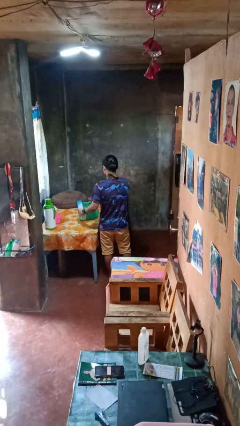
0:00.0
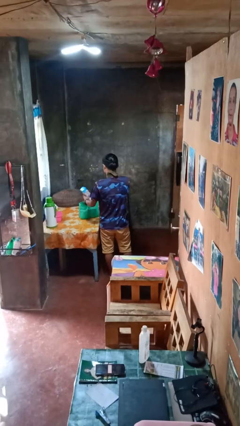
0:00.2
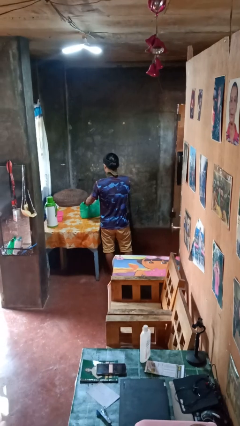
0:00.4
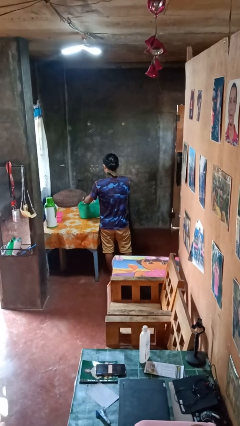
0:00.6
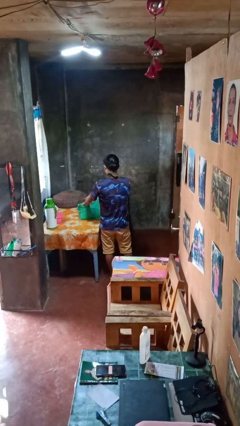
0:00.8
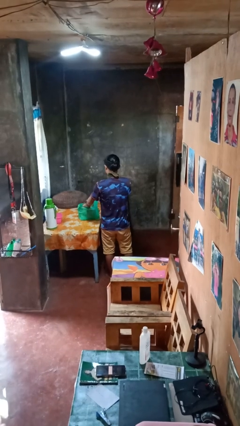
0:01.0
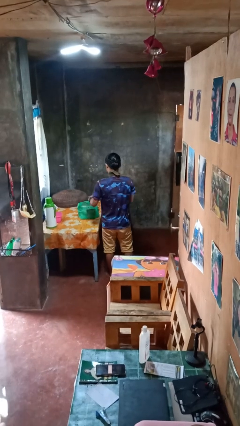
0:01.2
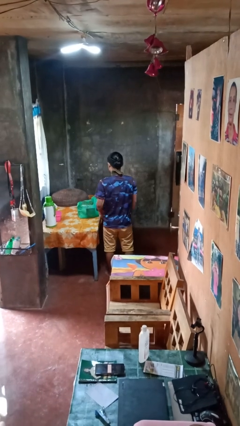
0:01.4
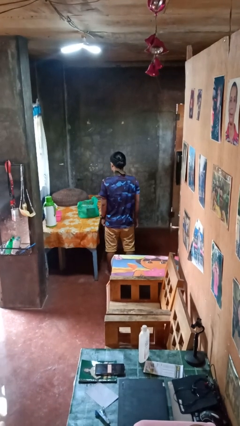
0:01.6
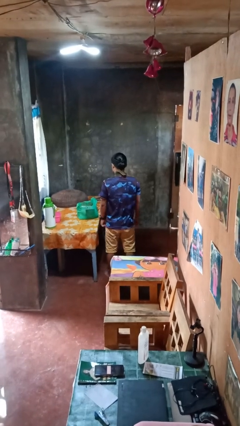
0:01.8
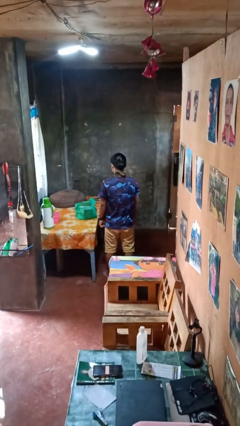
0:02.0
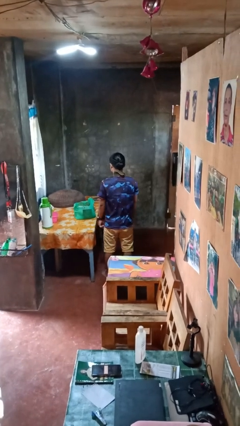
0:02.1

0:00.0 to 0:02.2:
person puts object into bag

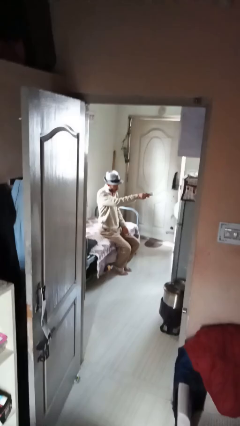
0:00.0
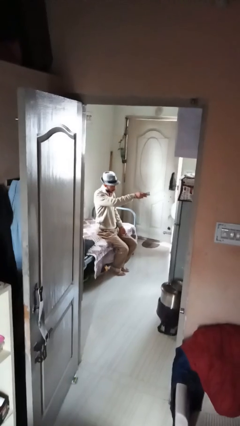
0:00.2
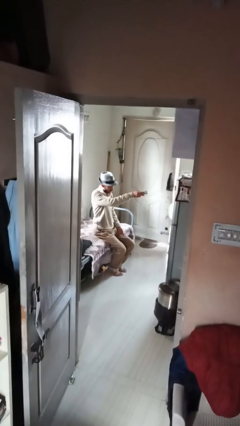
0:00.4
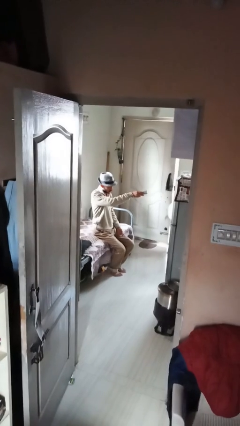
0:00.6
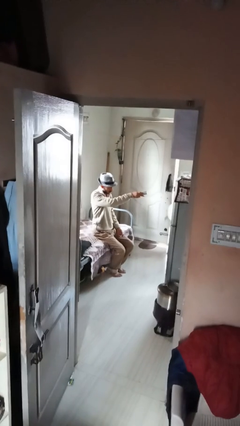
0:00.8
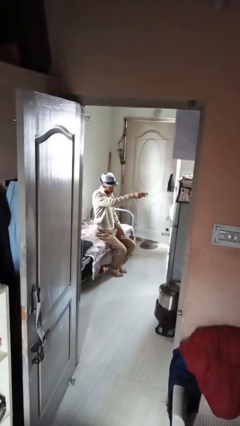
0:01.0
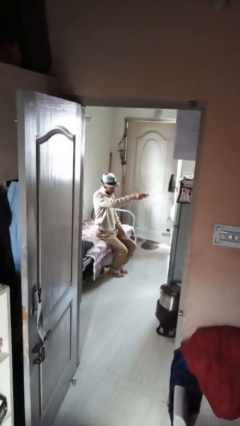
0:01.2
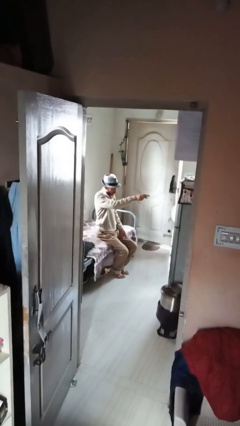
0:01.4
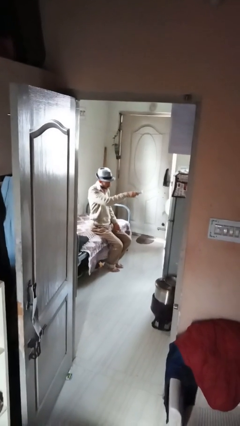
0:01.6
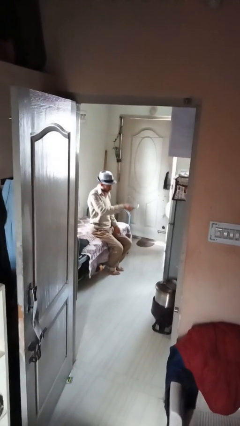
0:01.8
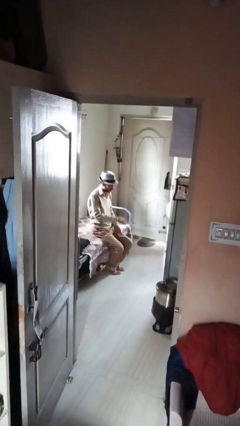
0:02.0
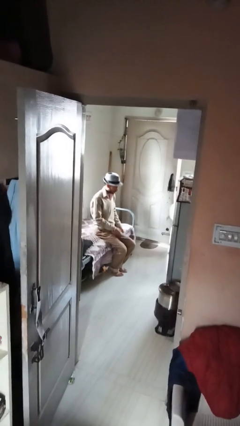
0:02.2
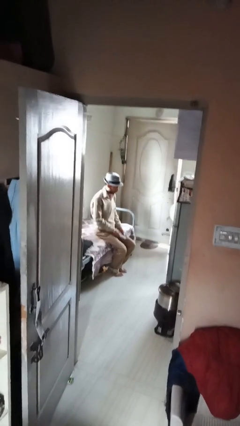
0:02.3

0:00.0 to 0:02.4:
person uses television remote

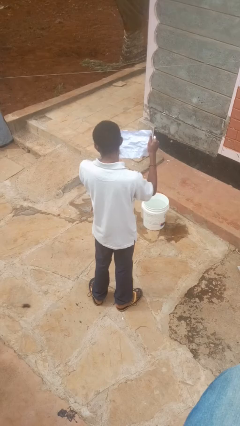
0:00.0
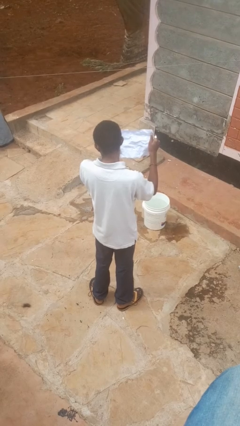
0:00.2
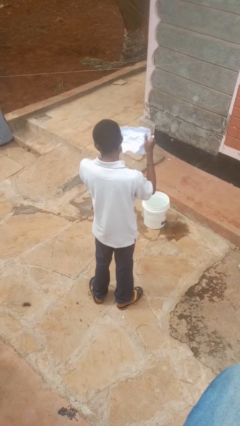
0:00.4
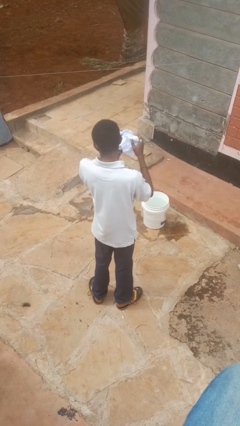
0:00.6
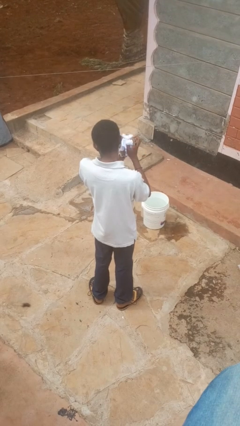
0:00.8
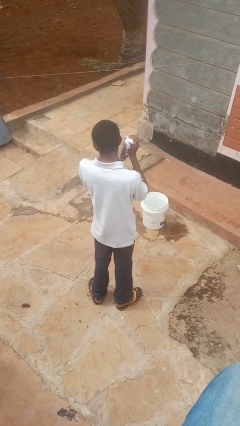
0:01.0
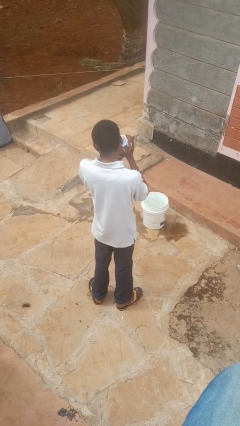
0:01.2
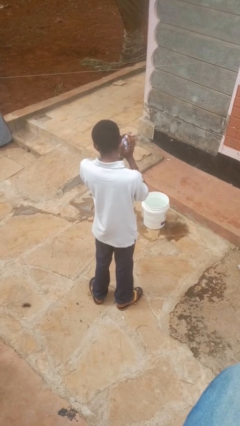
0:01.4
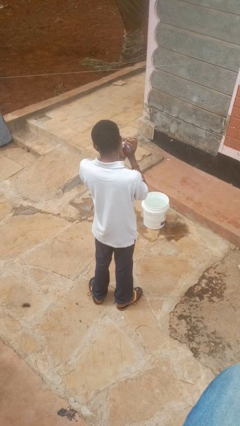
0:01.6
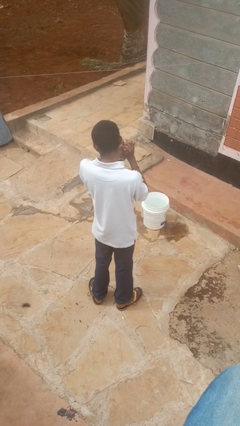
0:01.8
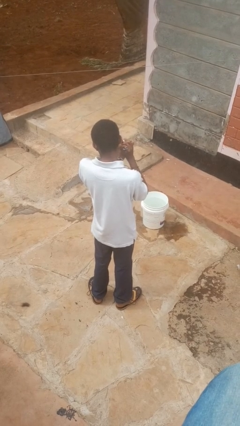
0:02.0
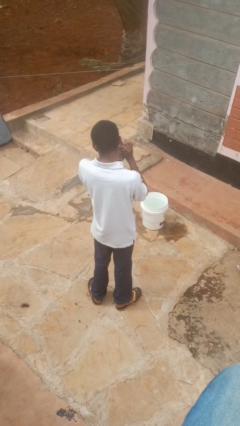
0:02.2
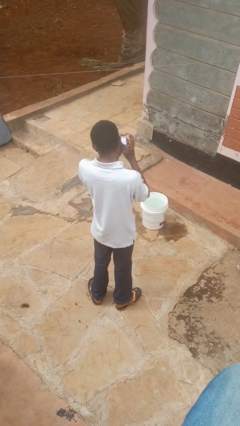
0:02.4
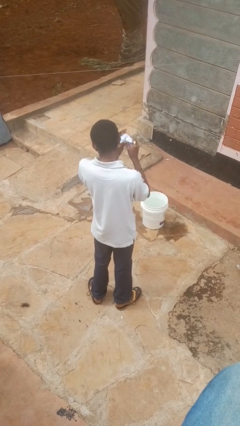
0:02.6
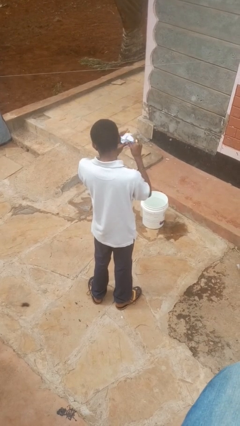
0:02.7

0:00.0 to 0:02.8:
person crumples paper

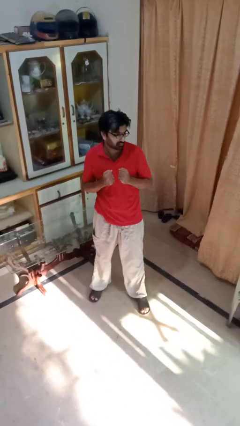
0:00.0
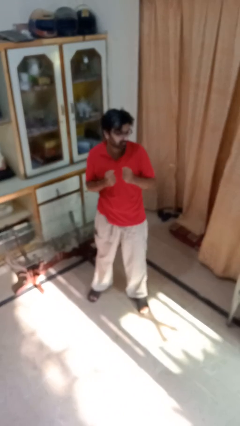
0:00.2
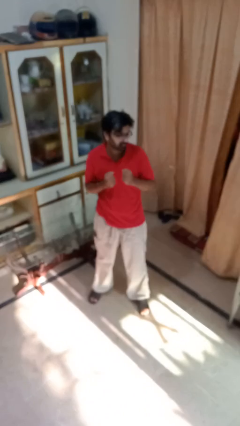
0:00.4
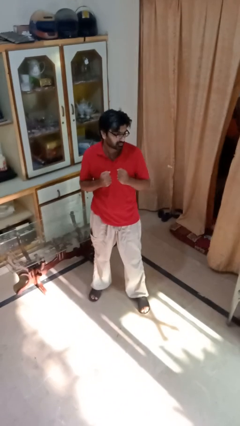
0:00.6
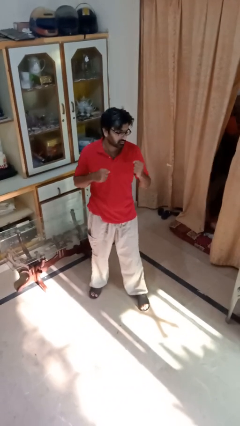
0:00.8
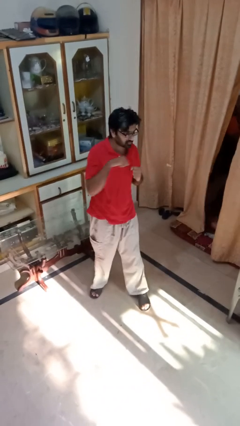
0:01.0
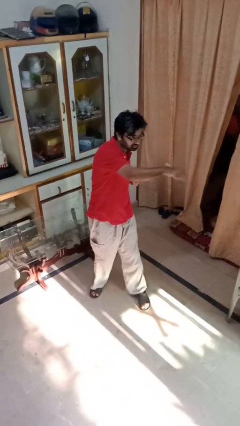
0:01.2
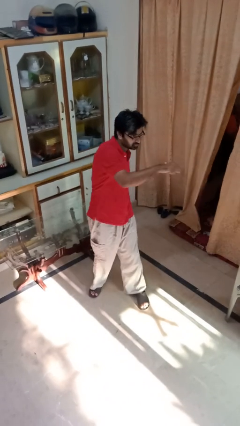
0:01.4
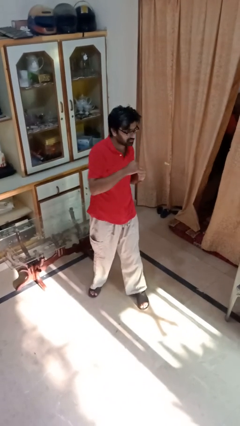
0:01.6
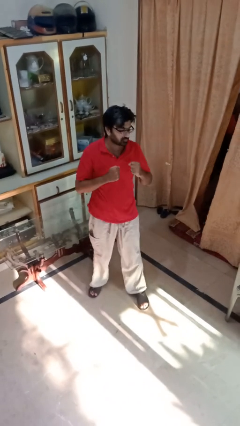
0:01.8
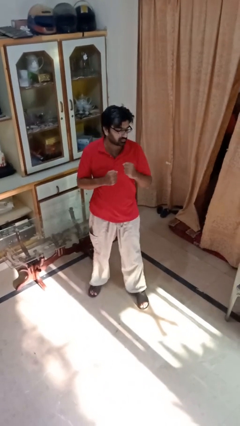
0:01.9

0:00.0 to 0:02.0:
person punches

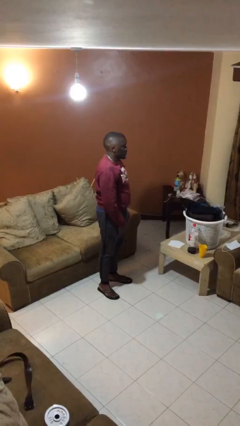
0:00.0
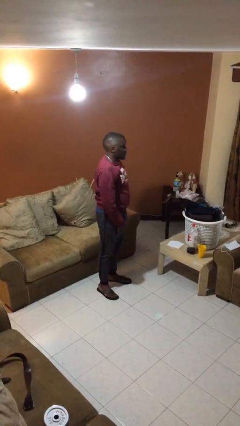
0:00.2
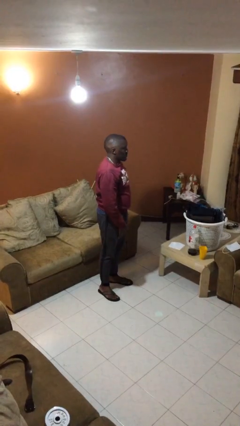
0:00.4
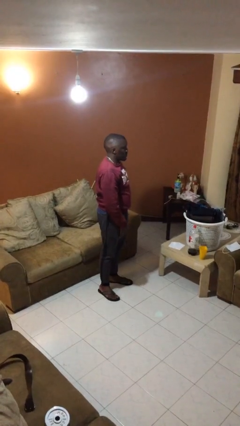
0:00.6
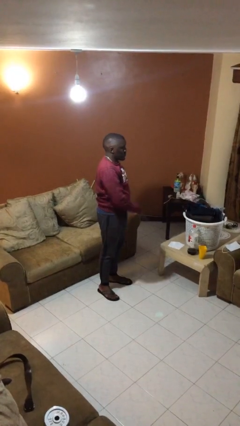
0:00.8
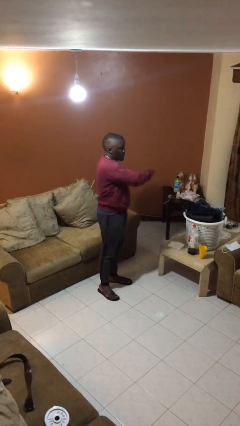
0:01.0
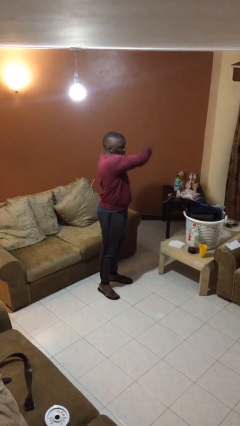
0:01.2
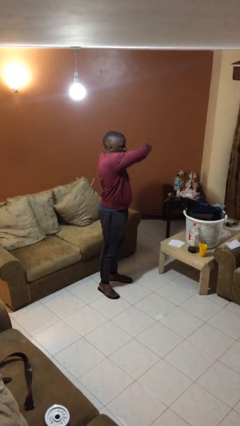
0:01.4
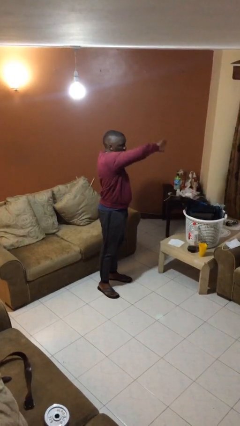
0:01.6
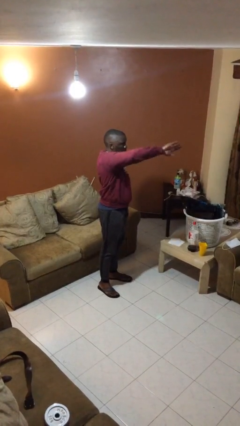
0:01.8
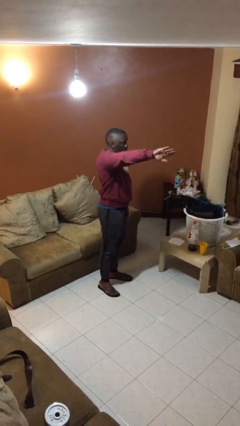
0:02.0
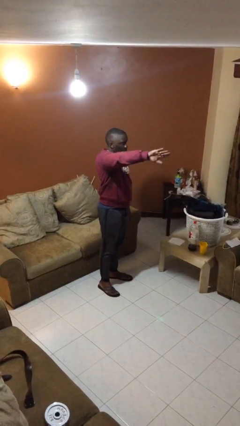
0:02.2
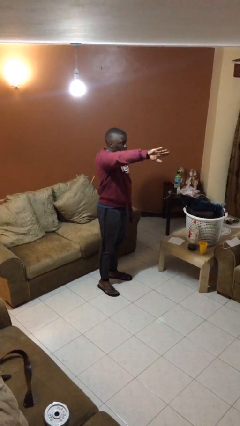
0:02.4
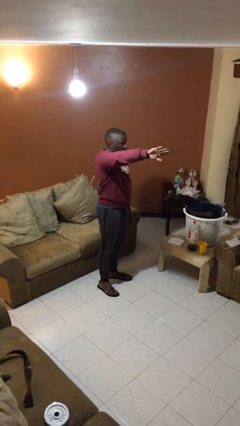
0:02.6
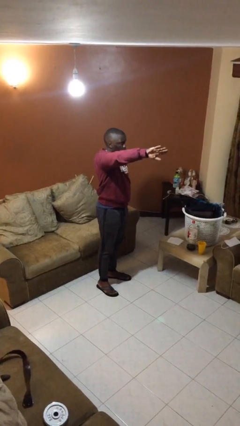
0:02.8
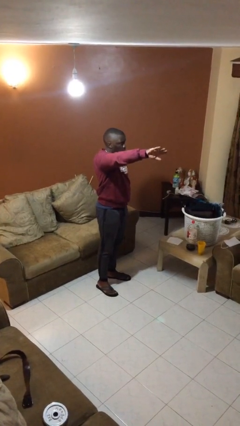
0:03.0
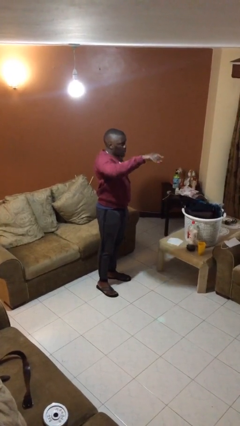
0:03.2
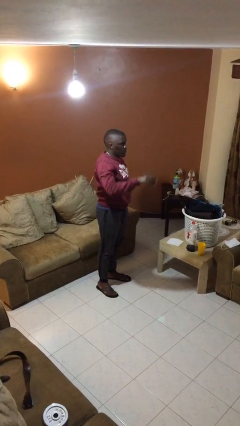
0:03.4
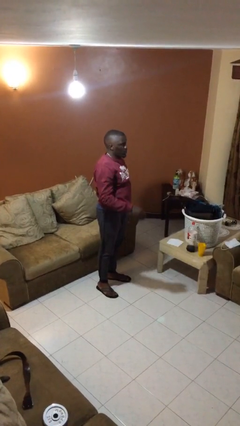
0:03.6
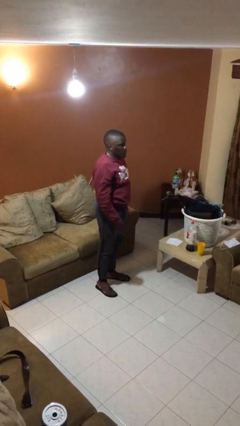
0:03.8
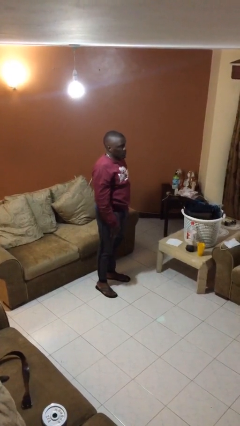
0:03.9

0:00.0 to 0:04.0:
person gestures swipe right

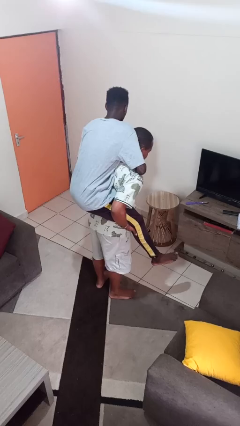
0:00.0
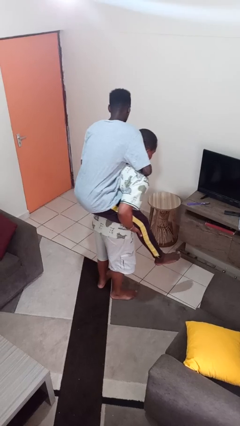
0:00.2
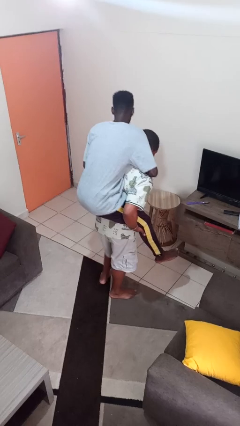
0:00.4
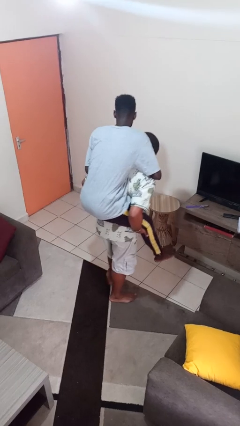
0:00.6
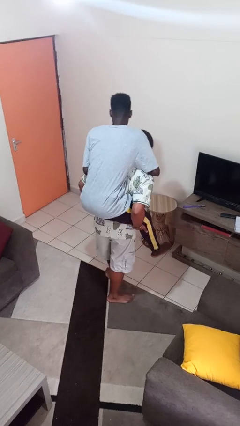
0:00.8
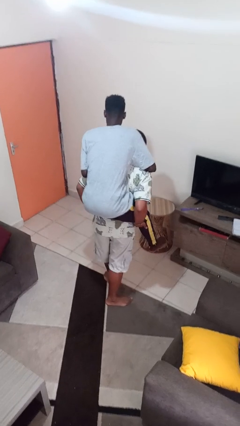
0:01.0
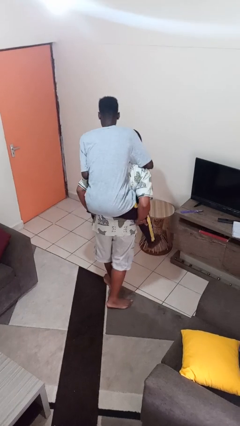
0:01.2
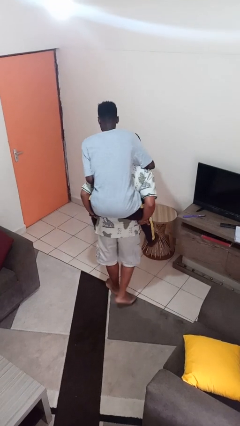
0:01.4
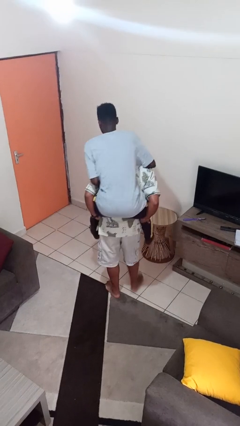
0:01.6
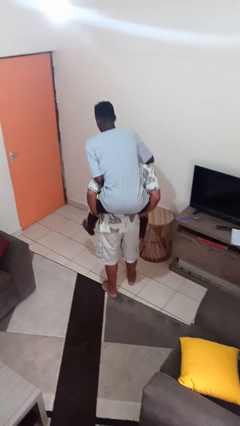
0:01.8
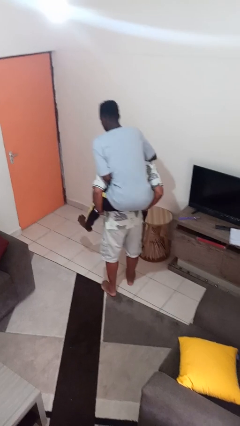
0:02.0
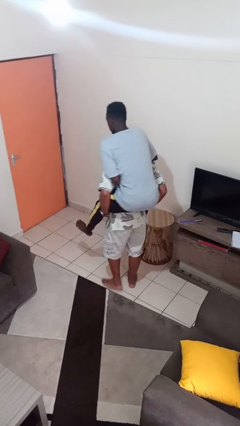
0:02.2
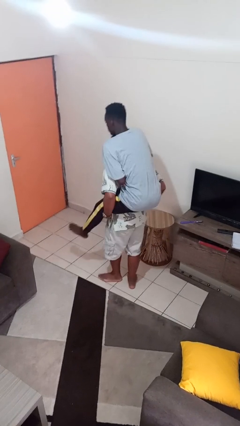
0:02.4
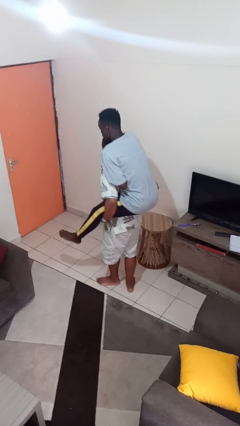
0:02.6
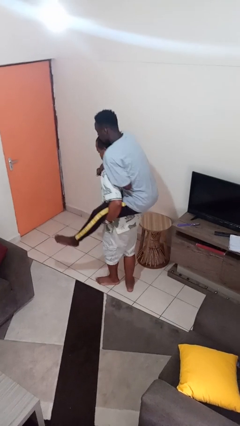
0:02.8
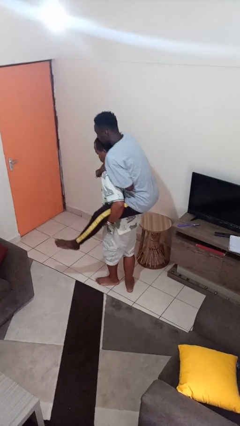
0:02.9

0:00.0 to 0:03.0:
person carries person on back

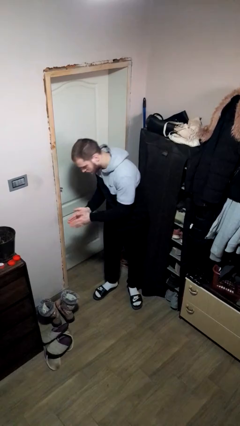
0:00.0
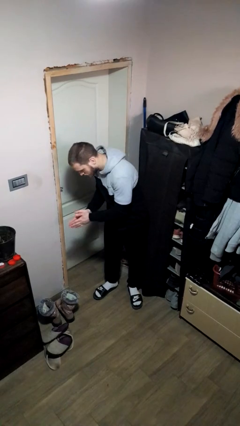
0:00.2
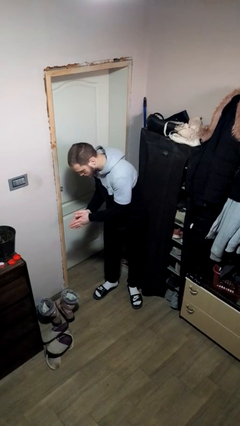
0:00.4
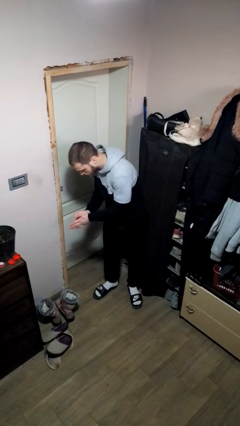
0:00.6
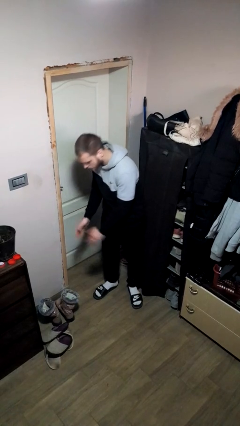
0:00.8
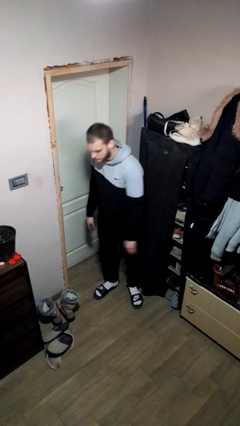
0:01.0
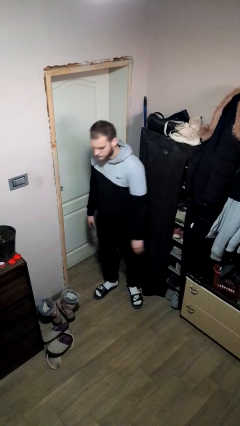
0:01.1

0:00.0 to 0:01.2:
person claps hands
